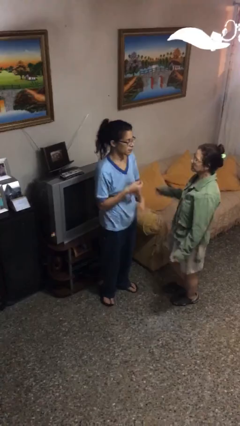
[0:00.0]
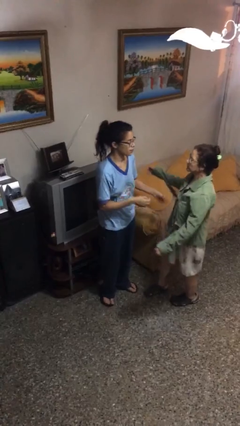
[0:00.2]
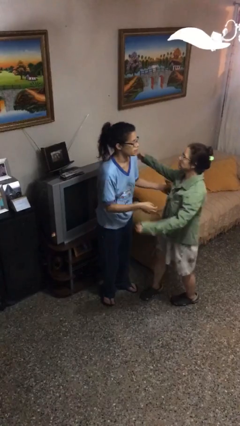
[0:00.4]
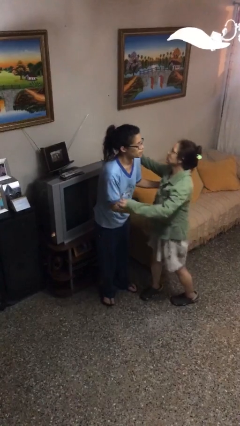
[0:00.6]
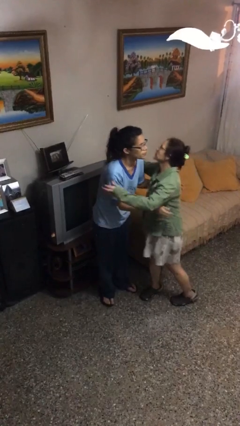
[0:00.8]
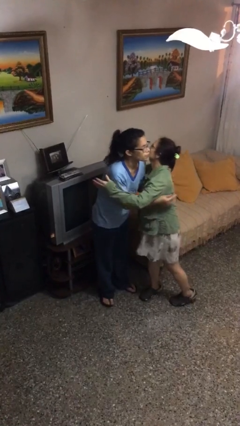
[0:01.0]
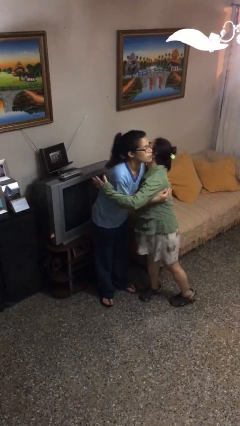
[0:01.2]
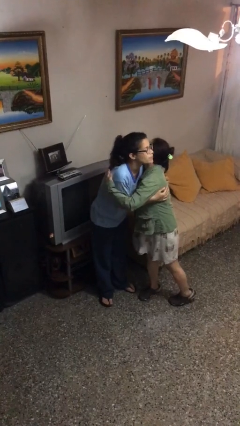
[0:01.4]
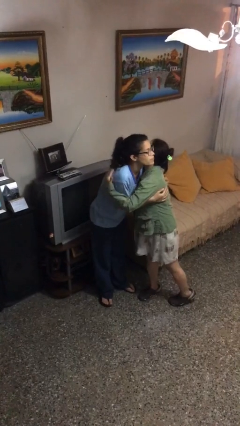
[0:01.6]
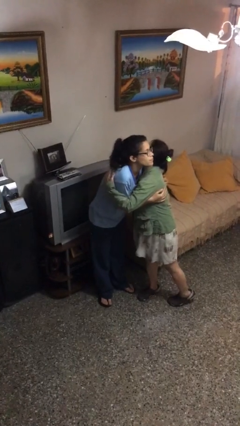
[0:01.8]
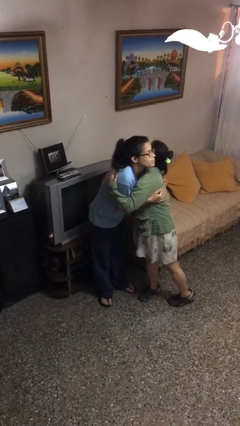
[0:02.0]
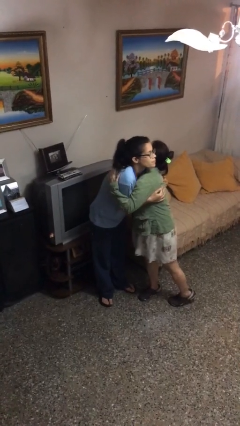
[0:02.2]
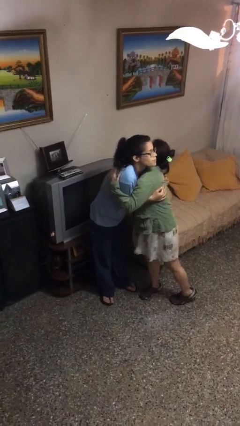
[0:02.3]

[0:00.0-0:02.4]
person embraces person

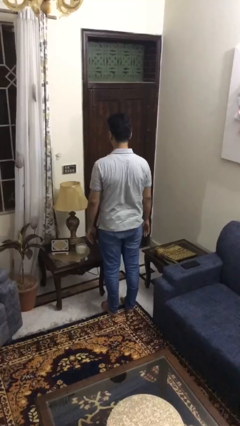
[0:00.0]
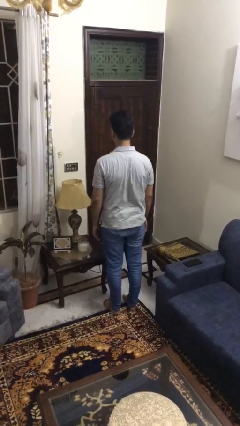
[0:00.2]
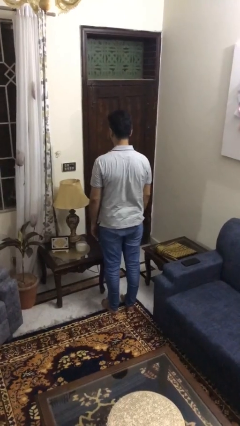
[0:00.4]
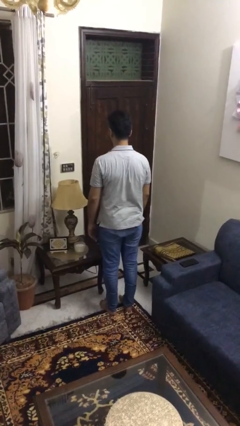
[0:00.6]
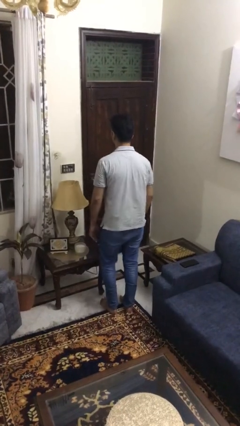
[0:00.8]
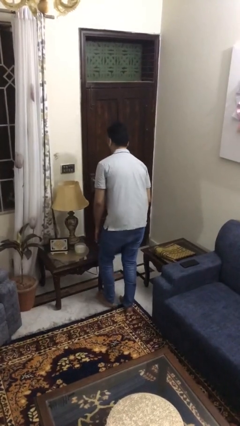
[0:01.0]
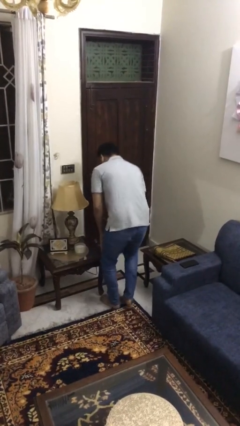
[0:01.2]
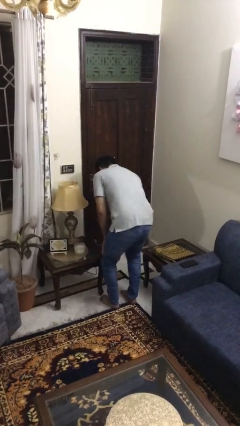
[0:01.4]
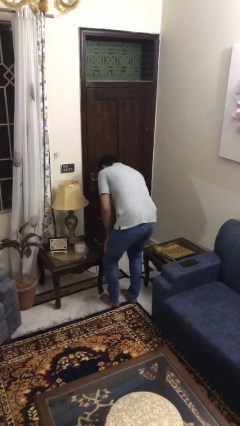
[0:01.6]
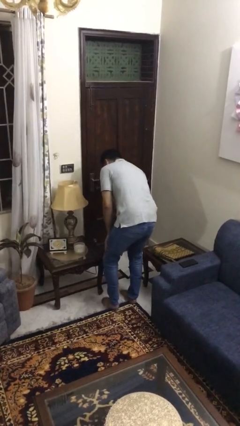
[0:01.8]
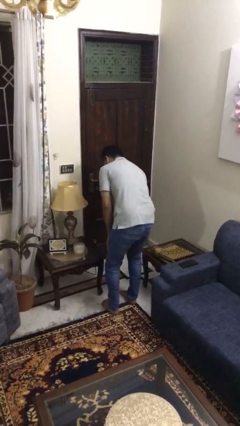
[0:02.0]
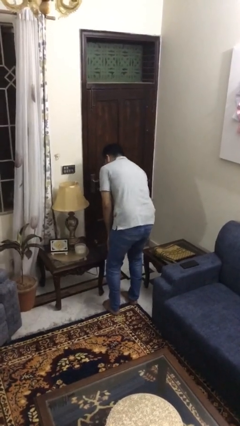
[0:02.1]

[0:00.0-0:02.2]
person stubs toe

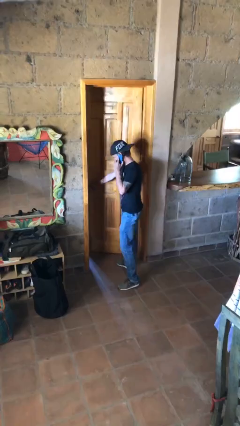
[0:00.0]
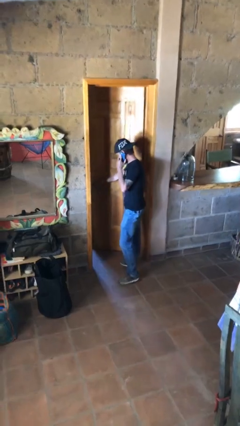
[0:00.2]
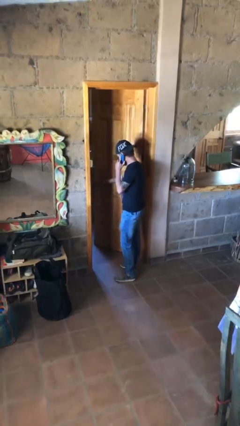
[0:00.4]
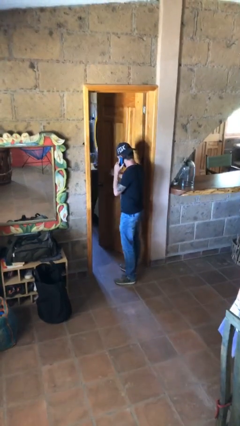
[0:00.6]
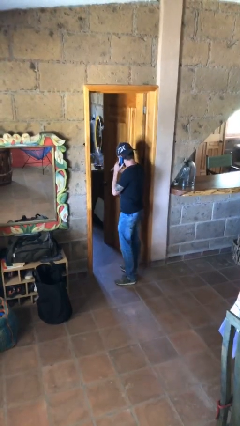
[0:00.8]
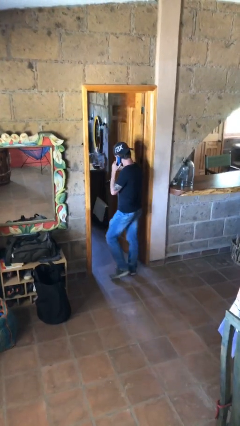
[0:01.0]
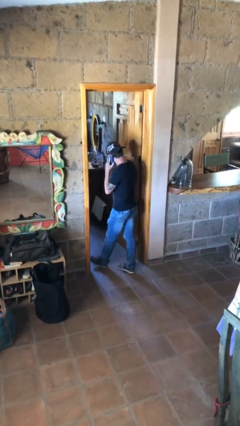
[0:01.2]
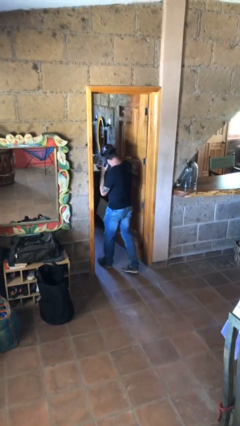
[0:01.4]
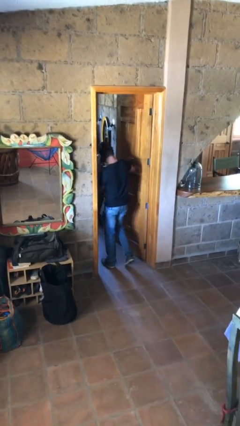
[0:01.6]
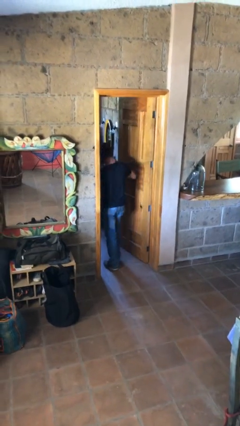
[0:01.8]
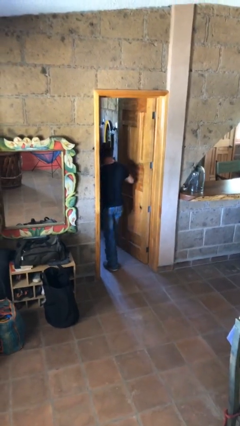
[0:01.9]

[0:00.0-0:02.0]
person exits scene through structure

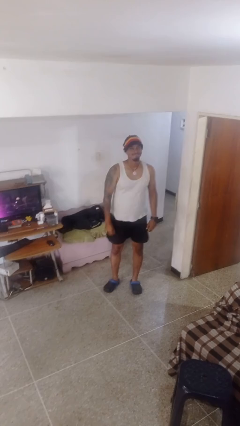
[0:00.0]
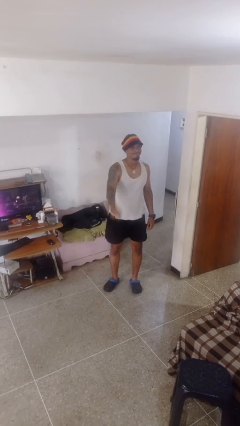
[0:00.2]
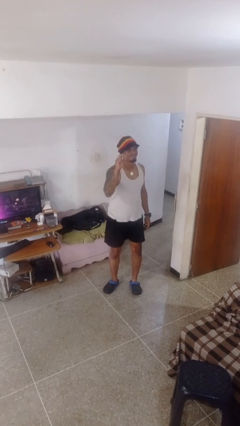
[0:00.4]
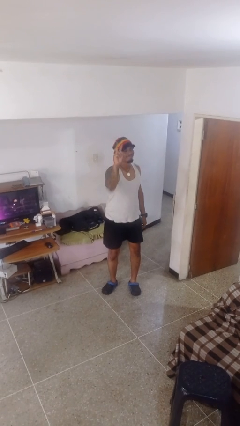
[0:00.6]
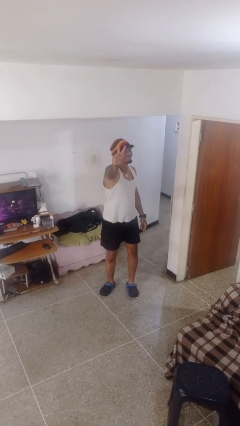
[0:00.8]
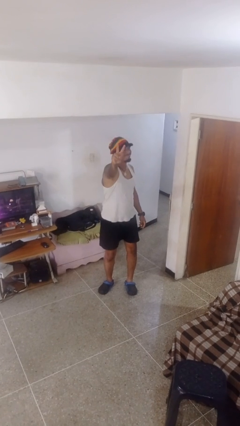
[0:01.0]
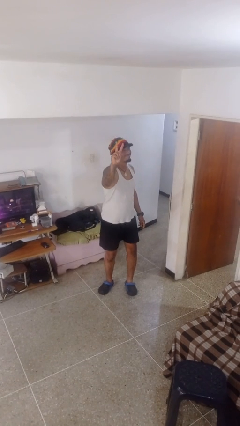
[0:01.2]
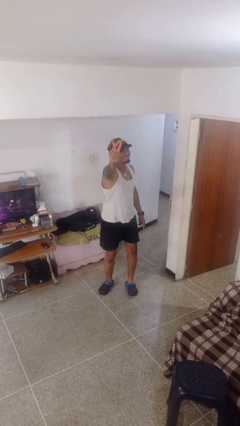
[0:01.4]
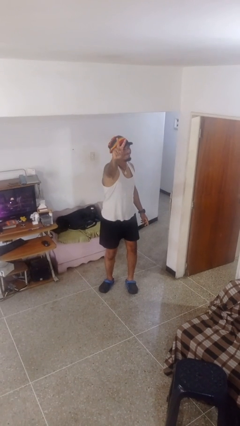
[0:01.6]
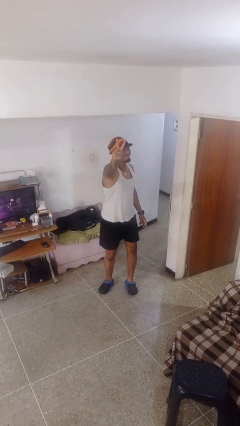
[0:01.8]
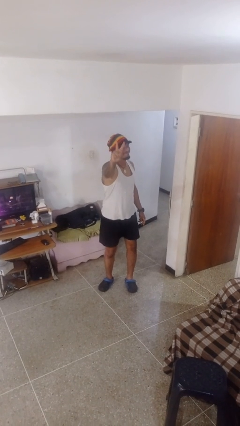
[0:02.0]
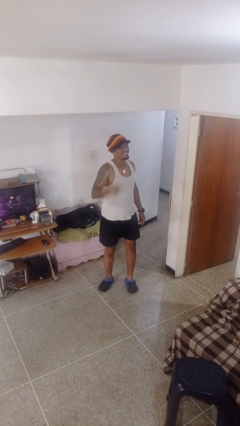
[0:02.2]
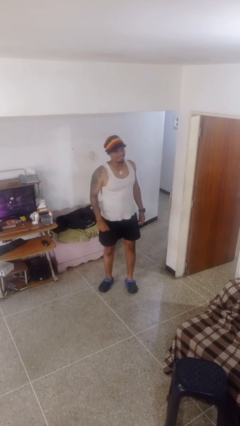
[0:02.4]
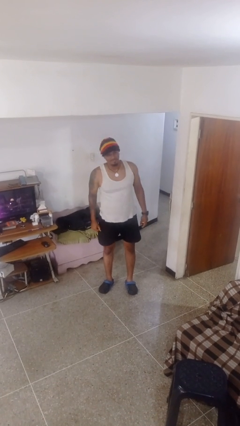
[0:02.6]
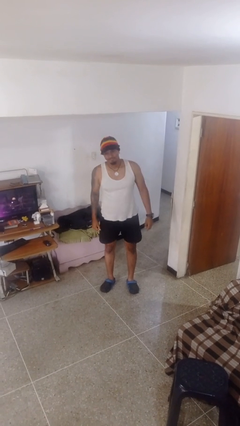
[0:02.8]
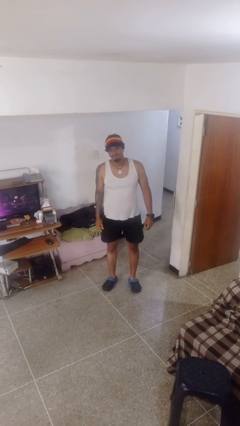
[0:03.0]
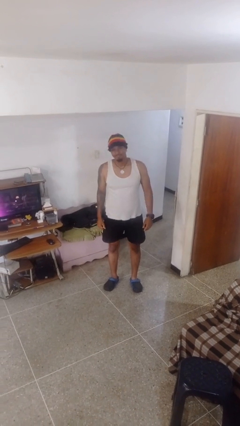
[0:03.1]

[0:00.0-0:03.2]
person gestures peace

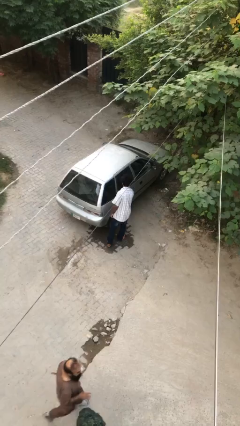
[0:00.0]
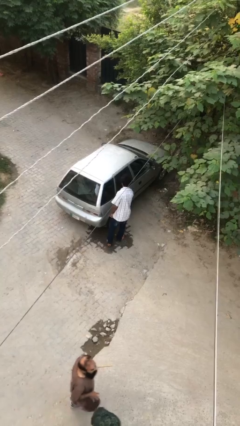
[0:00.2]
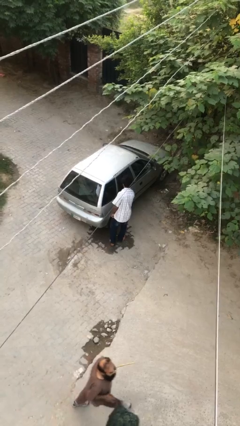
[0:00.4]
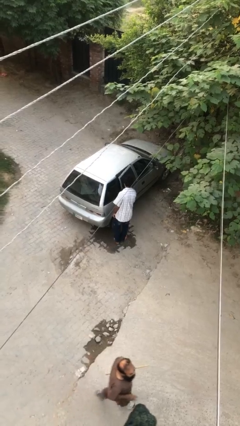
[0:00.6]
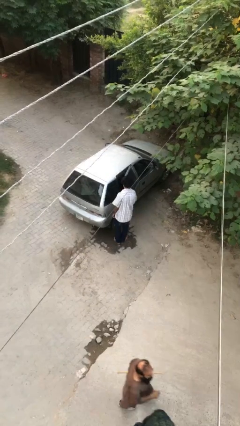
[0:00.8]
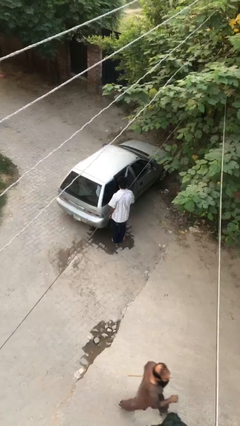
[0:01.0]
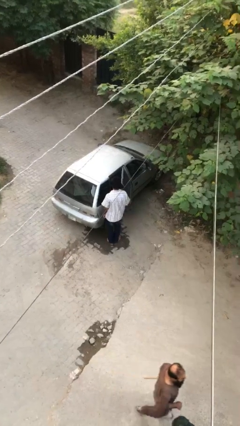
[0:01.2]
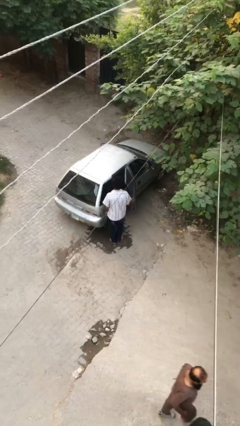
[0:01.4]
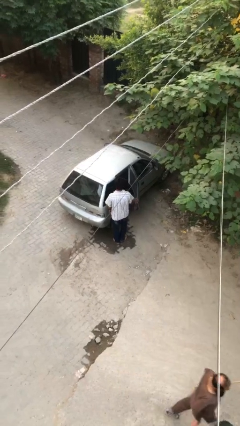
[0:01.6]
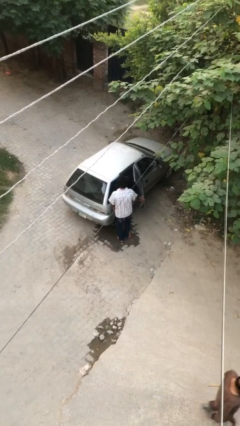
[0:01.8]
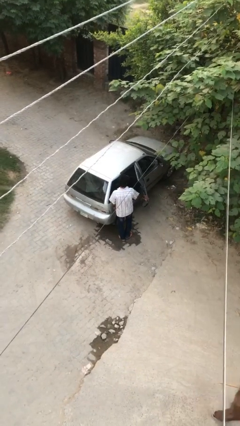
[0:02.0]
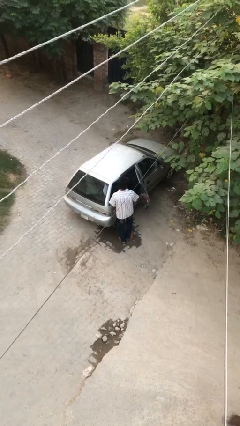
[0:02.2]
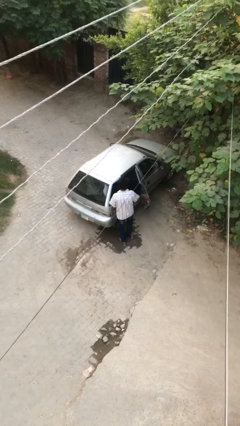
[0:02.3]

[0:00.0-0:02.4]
person opens car door

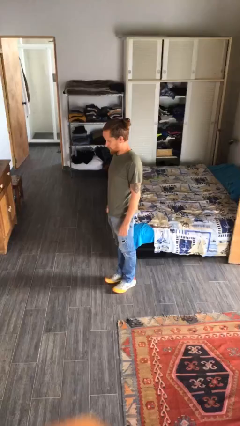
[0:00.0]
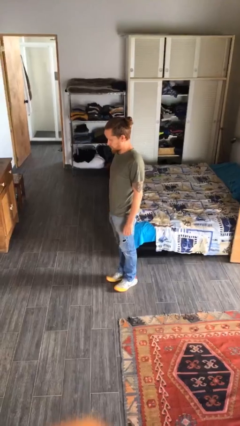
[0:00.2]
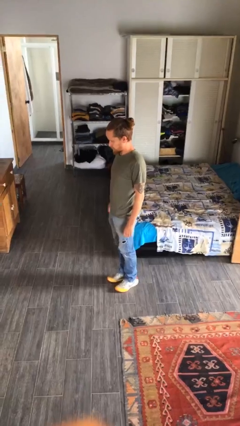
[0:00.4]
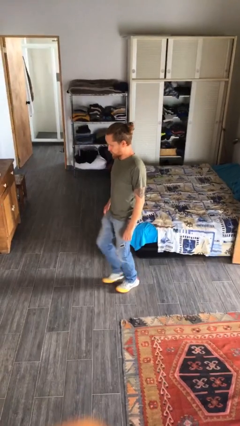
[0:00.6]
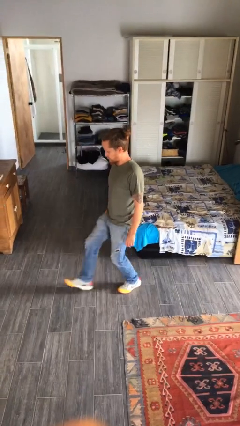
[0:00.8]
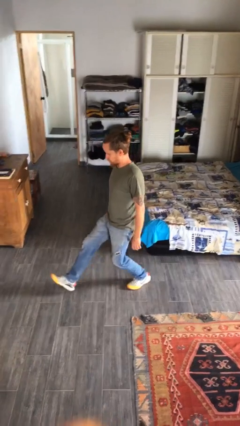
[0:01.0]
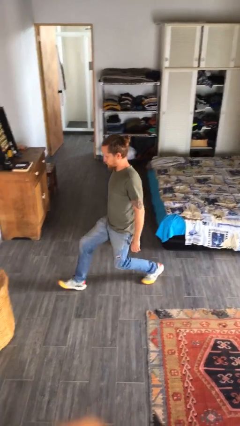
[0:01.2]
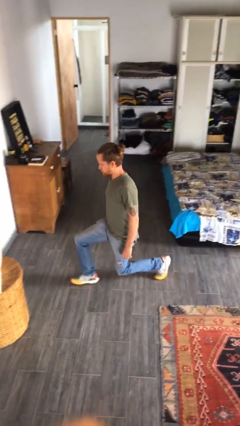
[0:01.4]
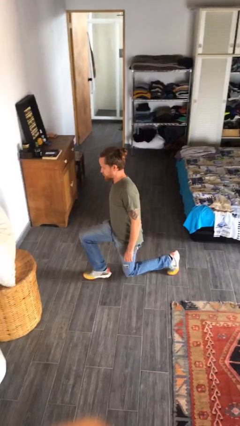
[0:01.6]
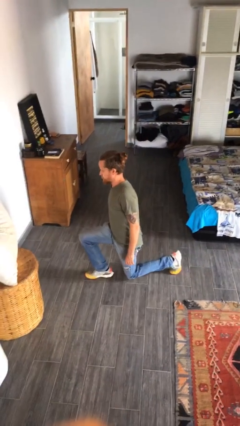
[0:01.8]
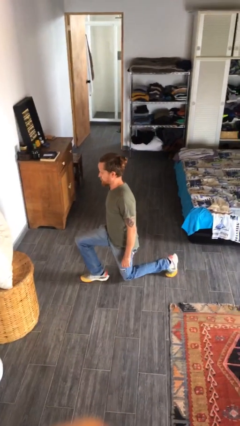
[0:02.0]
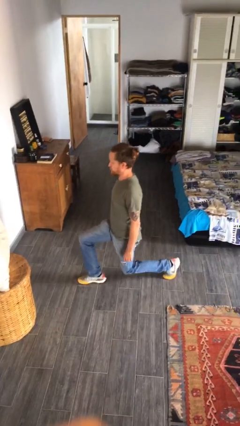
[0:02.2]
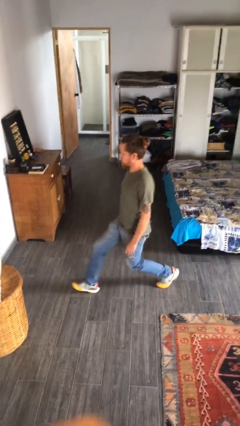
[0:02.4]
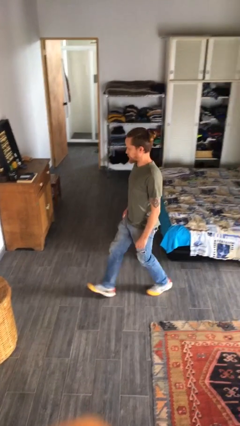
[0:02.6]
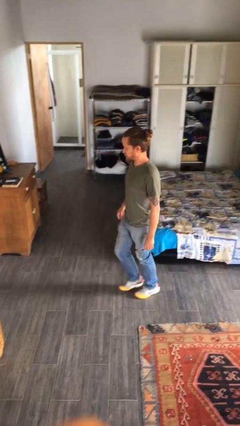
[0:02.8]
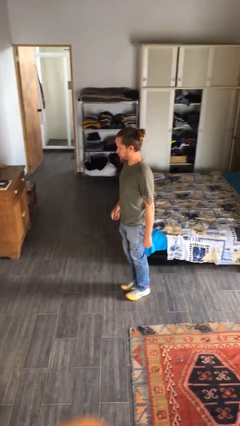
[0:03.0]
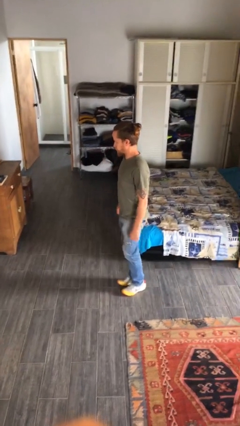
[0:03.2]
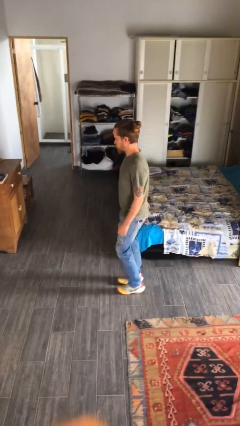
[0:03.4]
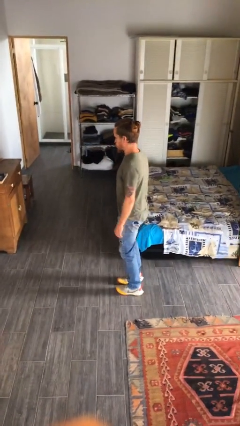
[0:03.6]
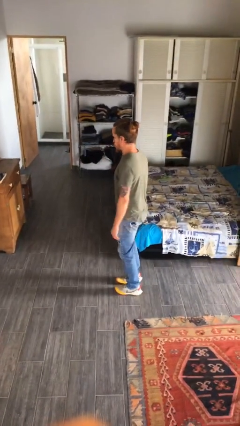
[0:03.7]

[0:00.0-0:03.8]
person exercises with lunges

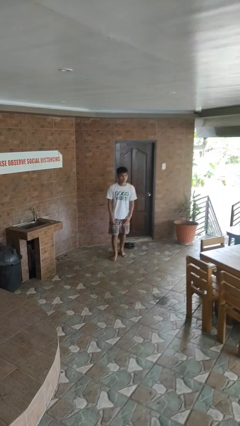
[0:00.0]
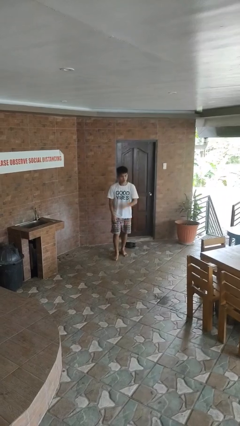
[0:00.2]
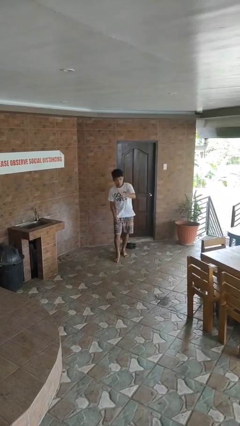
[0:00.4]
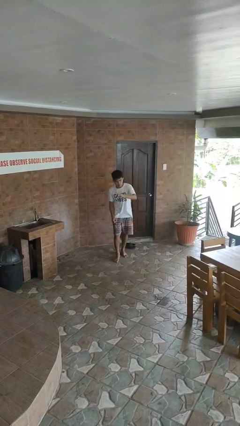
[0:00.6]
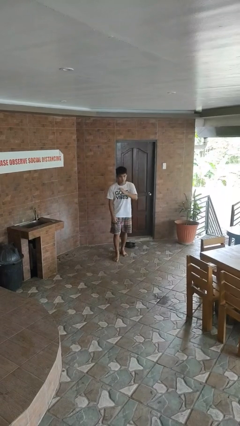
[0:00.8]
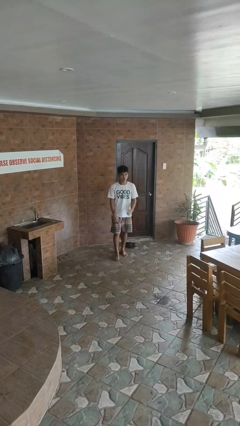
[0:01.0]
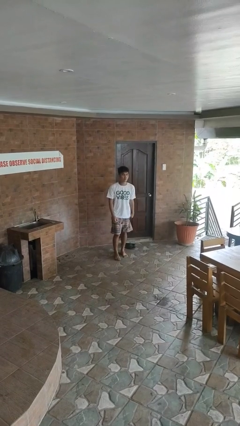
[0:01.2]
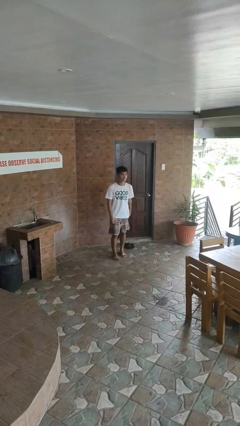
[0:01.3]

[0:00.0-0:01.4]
person karate chop
